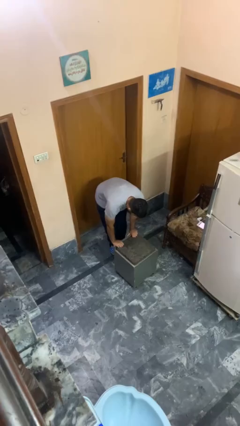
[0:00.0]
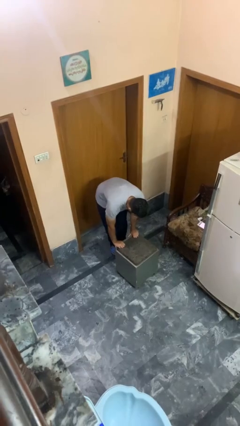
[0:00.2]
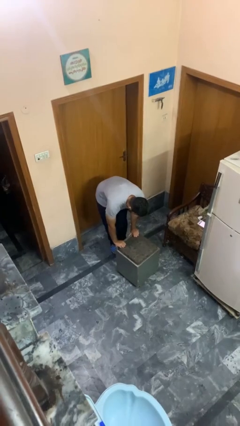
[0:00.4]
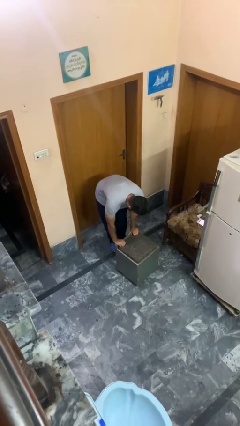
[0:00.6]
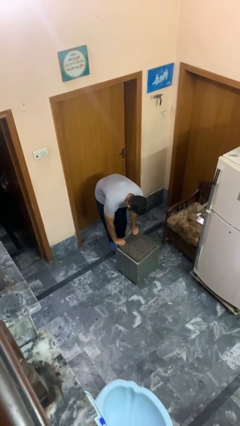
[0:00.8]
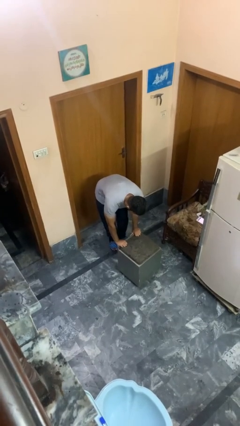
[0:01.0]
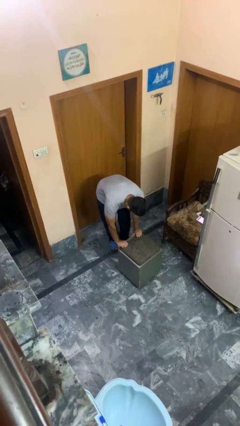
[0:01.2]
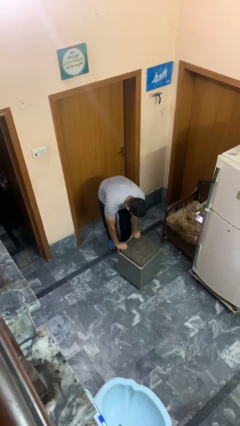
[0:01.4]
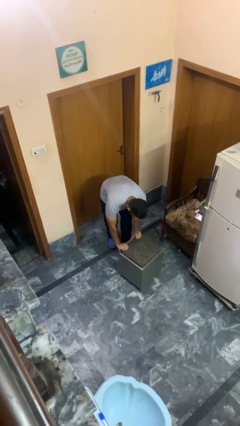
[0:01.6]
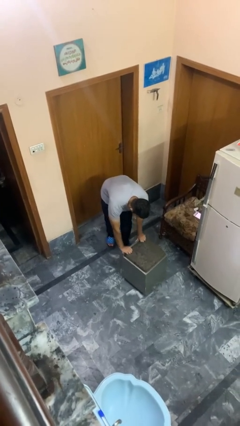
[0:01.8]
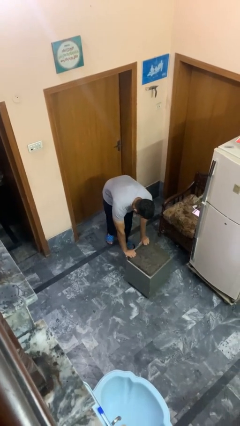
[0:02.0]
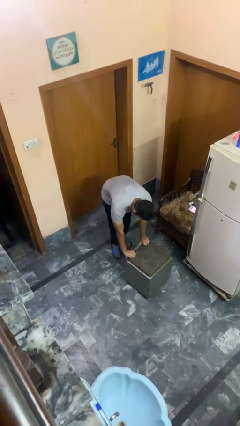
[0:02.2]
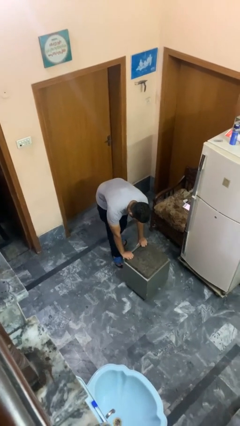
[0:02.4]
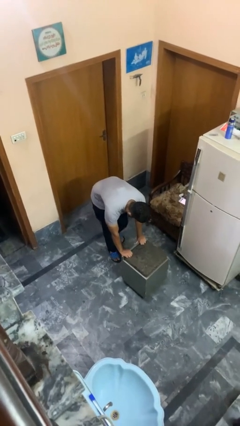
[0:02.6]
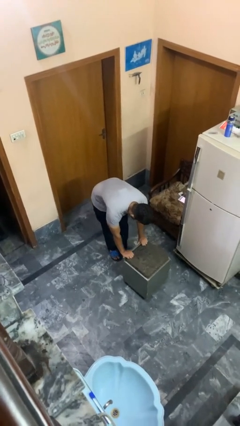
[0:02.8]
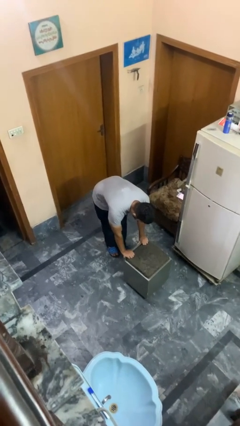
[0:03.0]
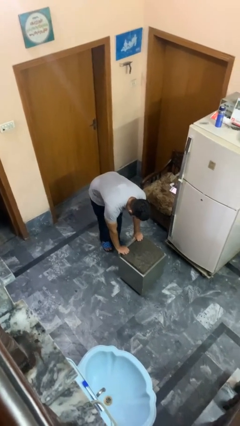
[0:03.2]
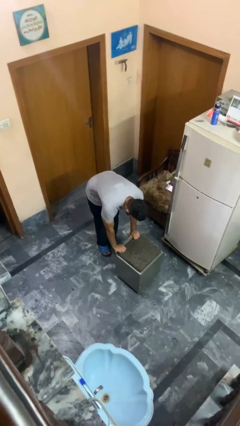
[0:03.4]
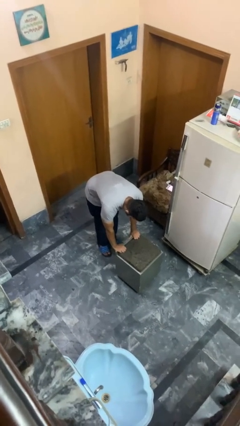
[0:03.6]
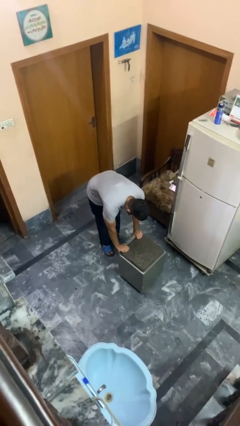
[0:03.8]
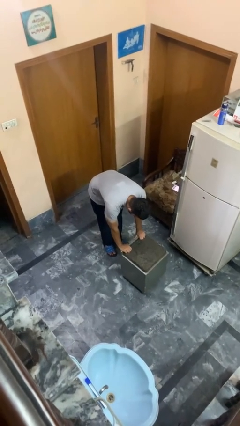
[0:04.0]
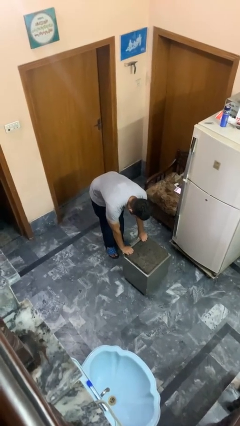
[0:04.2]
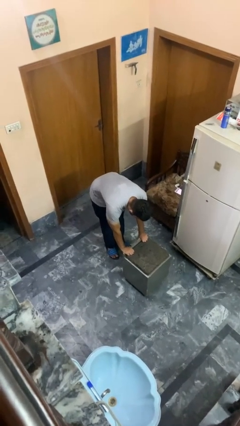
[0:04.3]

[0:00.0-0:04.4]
person pushes wheeled cart

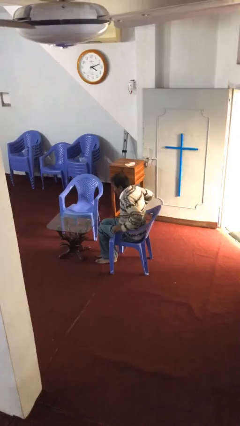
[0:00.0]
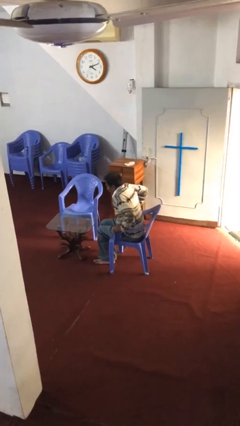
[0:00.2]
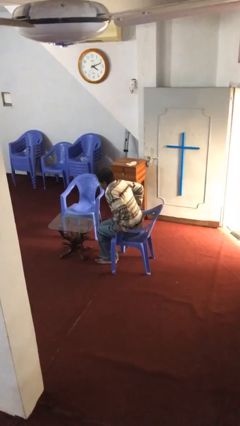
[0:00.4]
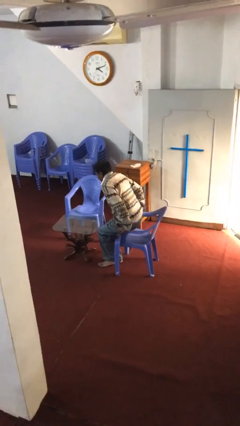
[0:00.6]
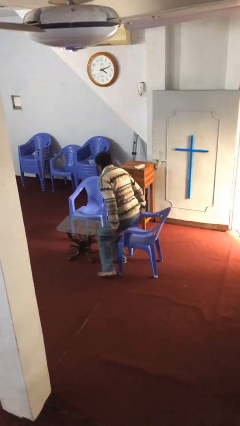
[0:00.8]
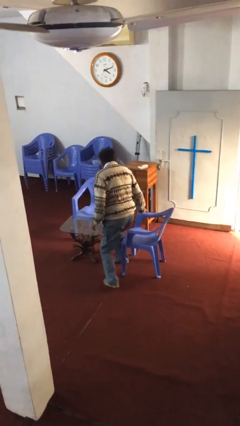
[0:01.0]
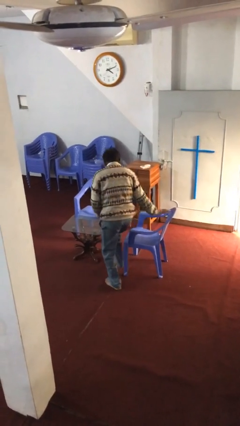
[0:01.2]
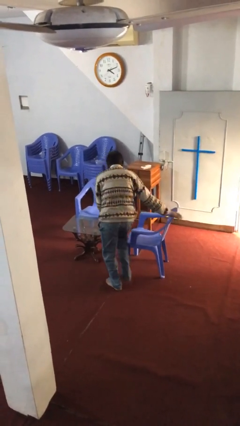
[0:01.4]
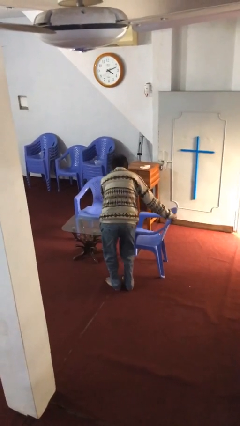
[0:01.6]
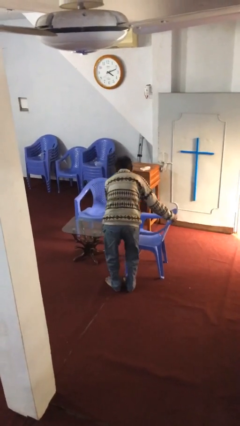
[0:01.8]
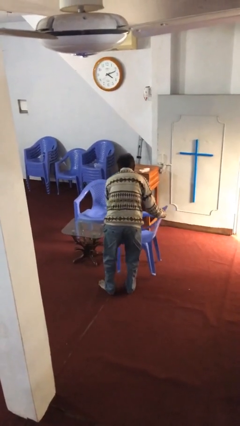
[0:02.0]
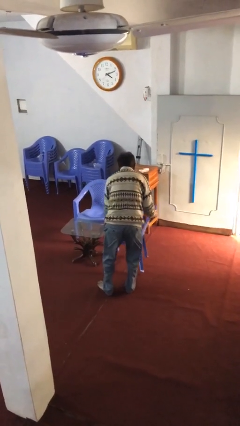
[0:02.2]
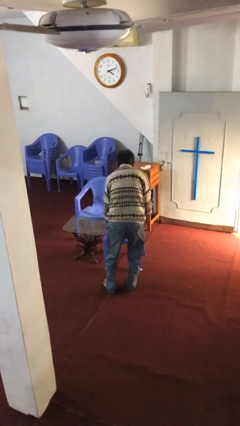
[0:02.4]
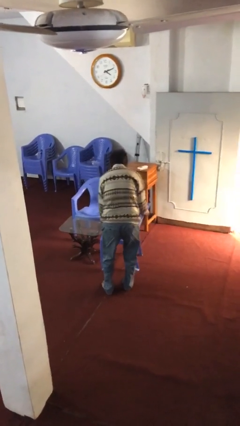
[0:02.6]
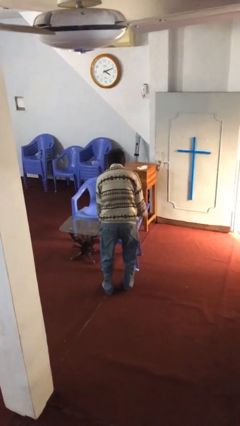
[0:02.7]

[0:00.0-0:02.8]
person stands up

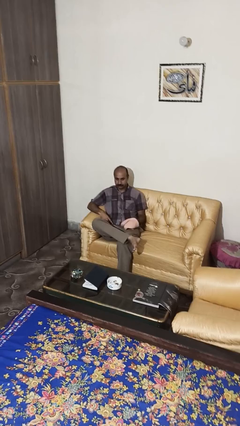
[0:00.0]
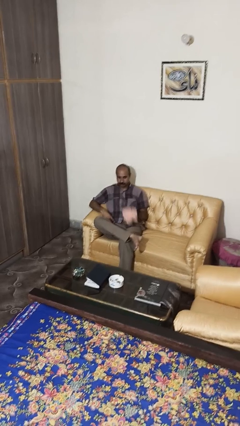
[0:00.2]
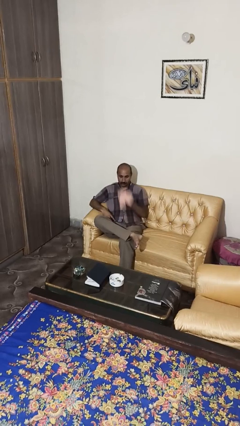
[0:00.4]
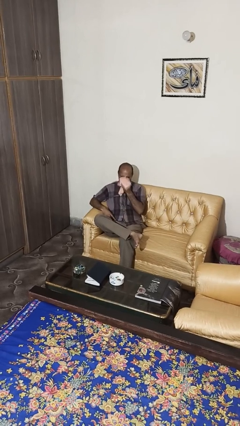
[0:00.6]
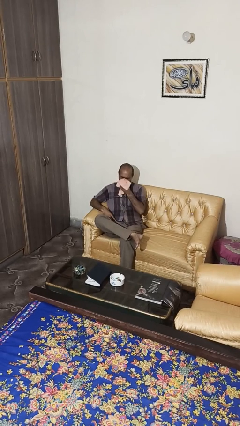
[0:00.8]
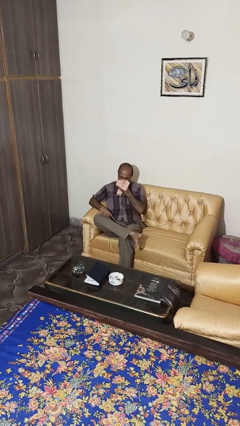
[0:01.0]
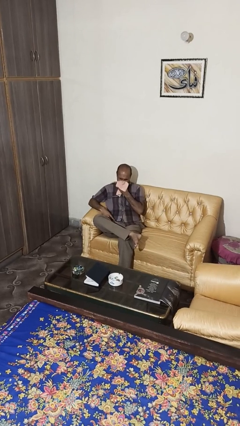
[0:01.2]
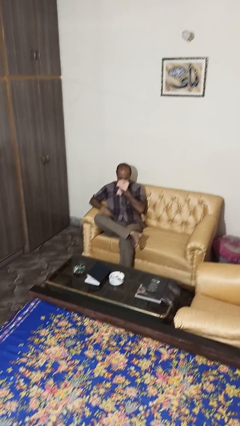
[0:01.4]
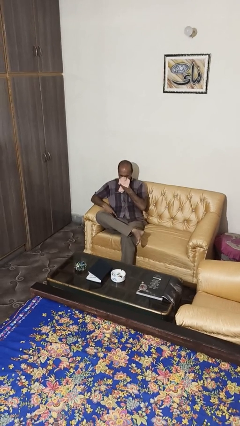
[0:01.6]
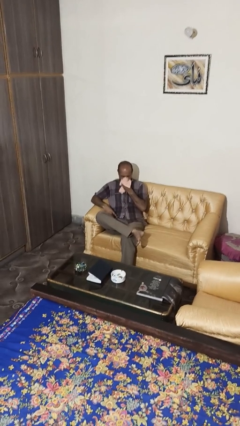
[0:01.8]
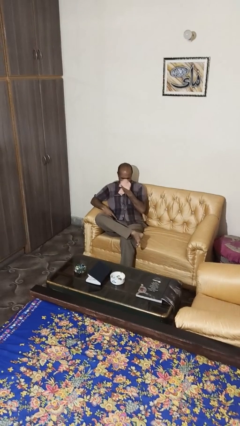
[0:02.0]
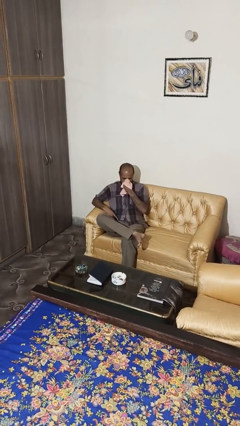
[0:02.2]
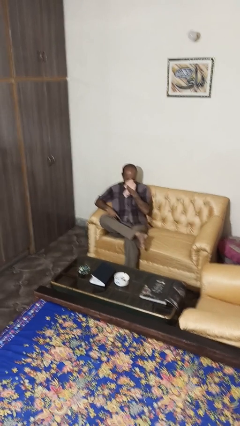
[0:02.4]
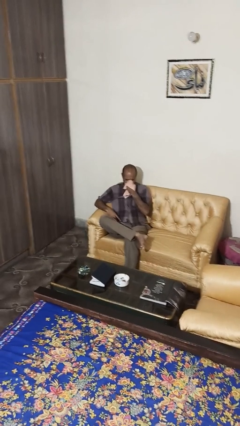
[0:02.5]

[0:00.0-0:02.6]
person blows nose

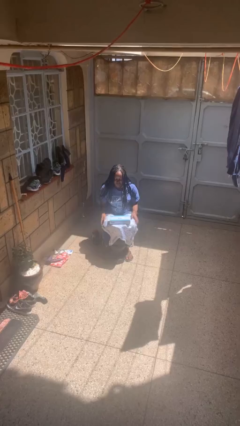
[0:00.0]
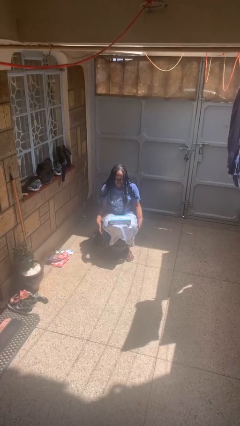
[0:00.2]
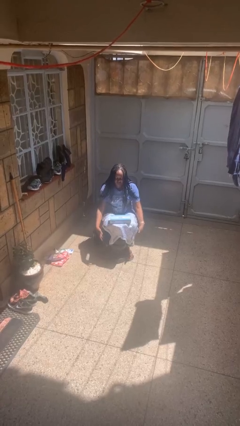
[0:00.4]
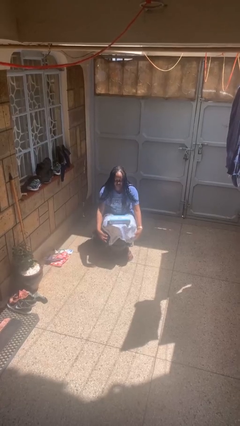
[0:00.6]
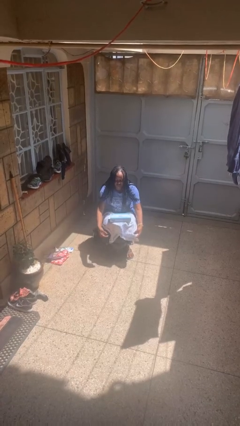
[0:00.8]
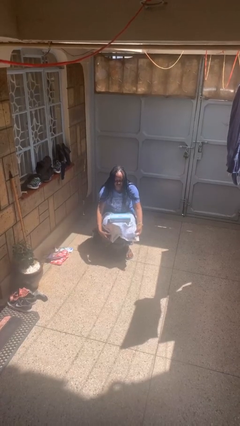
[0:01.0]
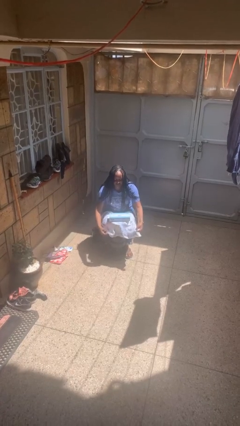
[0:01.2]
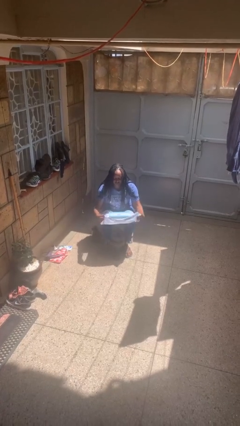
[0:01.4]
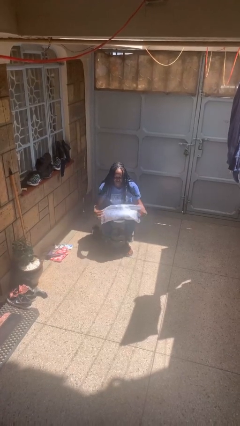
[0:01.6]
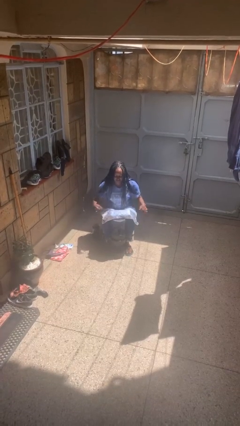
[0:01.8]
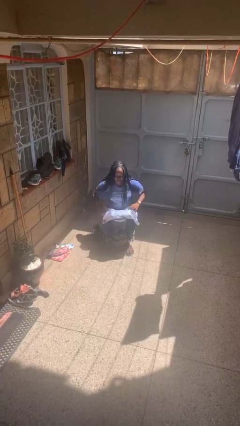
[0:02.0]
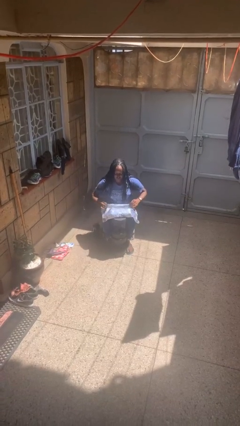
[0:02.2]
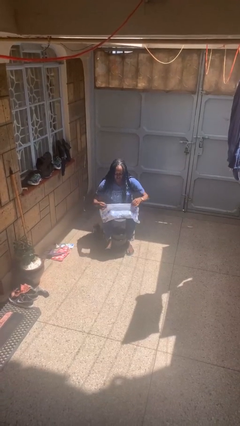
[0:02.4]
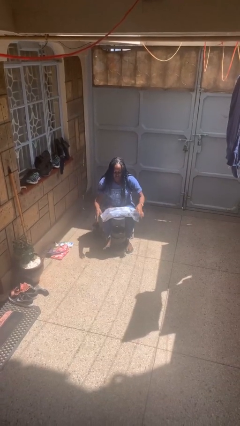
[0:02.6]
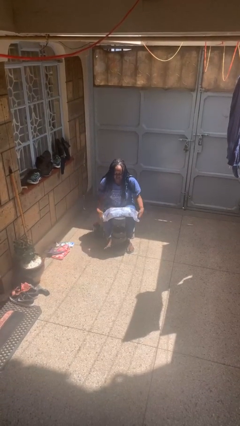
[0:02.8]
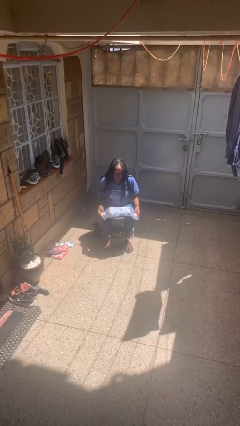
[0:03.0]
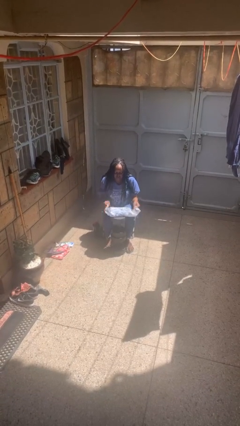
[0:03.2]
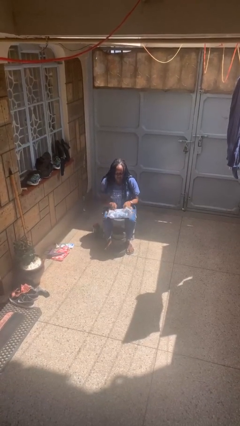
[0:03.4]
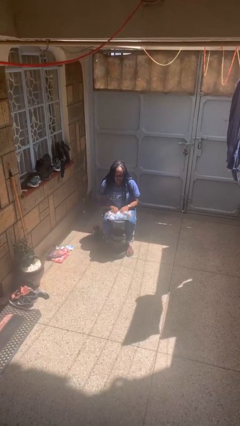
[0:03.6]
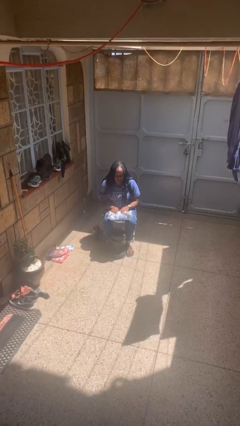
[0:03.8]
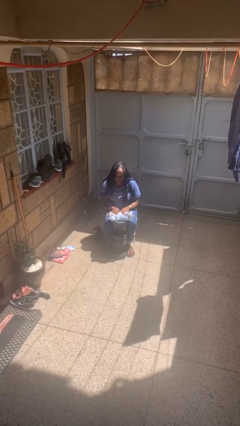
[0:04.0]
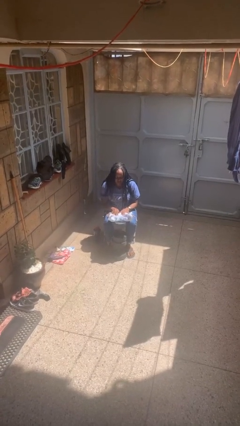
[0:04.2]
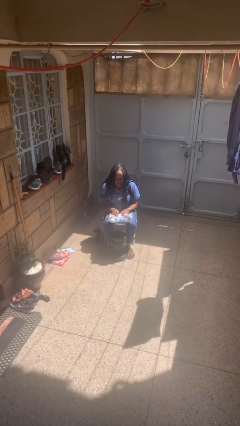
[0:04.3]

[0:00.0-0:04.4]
person wraps box

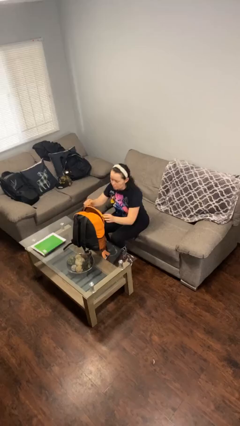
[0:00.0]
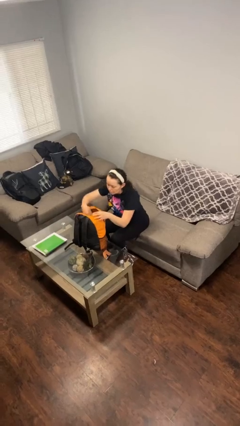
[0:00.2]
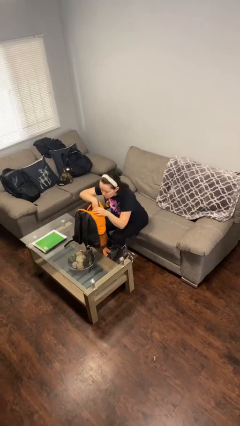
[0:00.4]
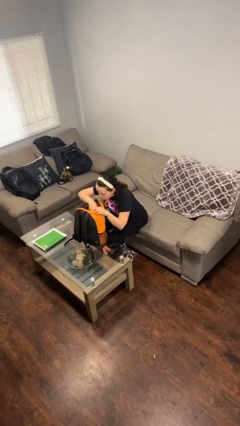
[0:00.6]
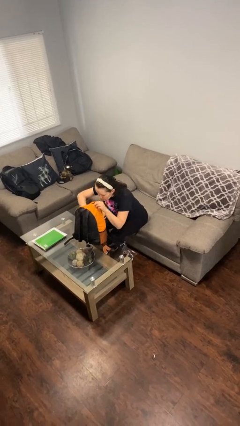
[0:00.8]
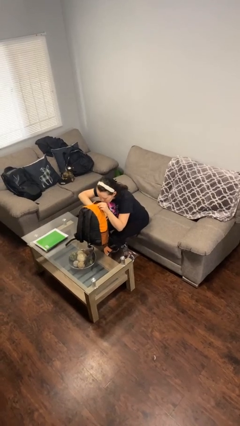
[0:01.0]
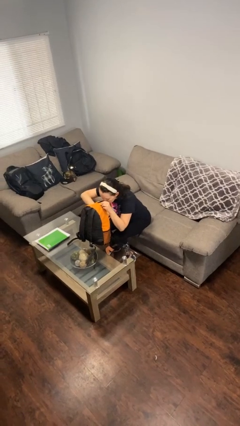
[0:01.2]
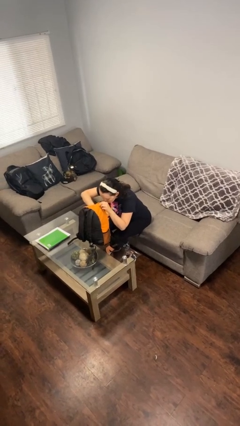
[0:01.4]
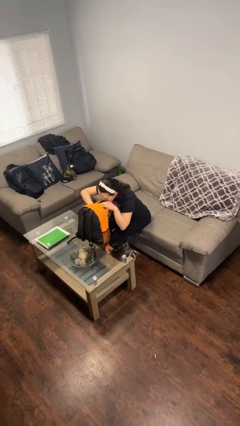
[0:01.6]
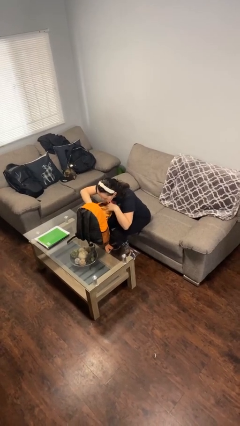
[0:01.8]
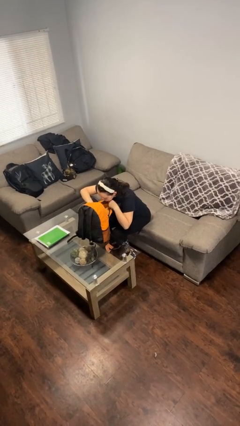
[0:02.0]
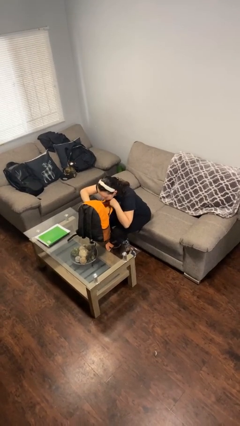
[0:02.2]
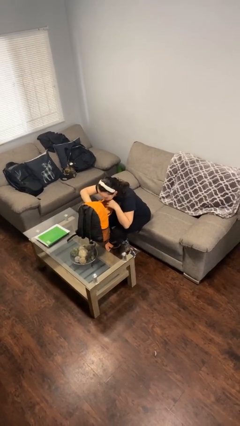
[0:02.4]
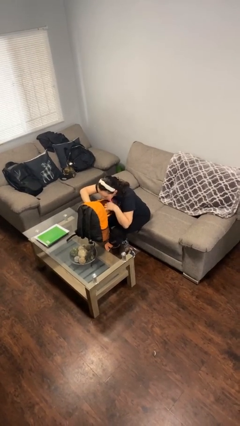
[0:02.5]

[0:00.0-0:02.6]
person searches in backpack

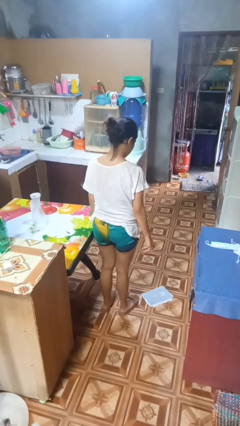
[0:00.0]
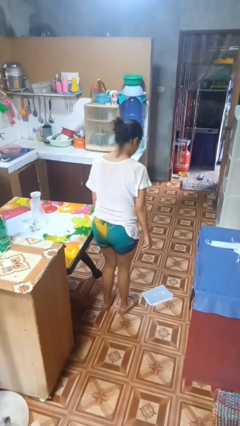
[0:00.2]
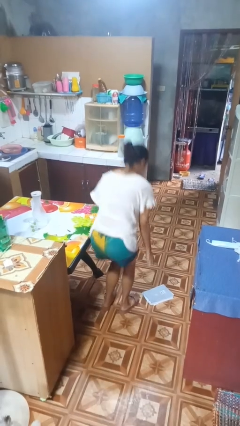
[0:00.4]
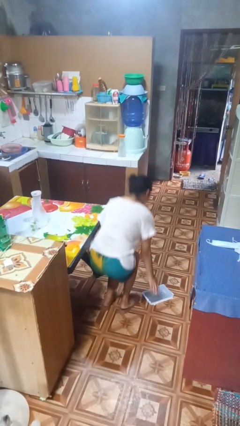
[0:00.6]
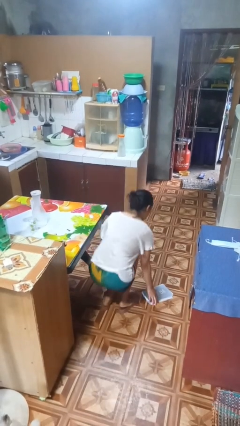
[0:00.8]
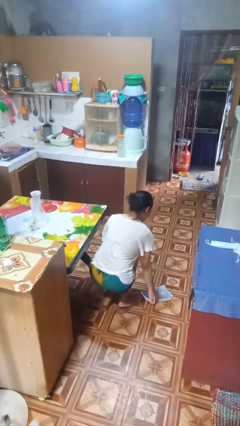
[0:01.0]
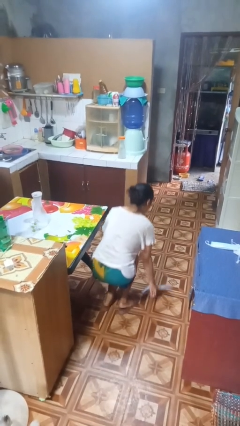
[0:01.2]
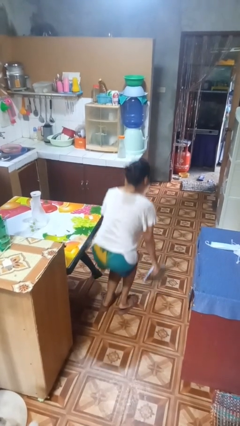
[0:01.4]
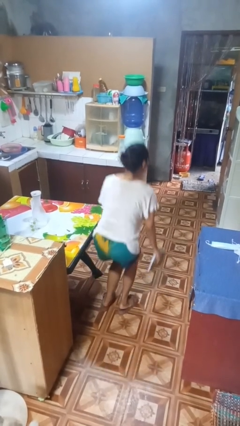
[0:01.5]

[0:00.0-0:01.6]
person picks up object from floor
